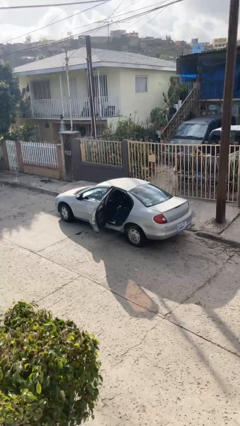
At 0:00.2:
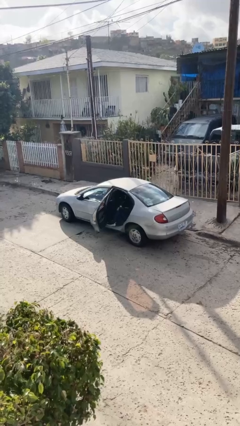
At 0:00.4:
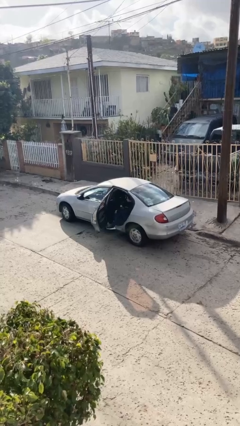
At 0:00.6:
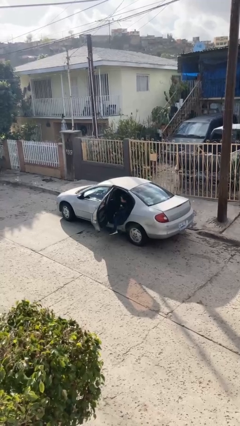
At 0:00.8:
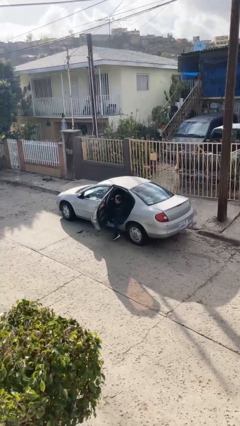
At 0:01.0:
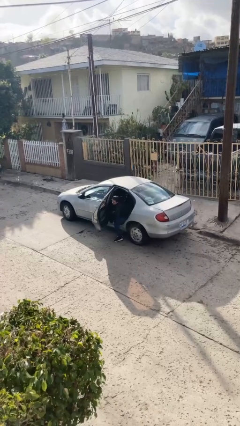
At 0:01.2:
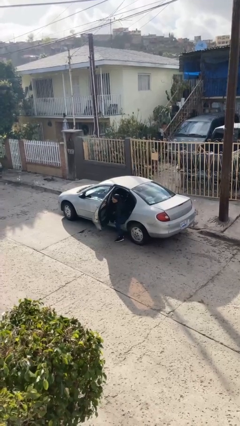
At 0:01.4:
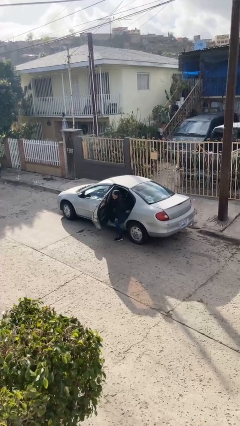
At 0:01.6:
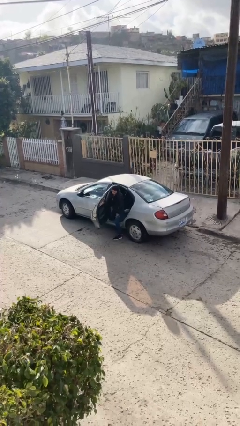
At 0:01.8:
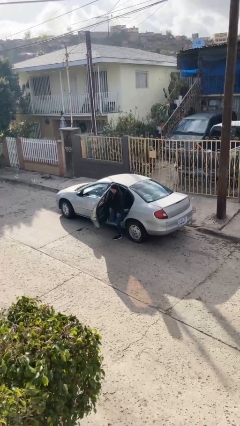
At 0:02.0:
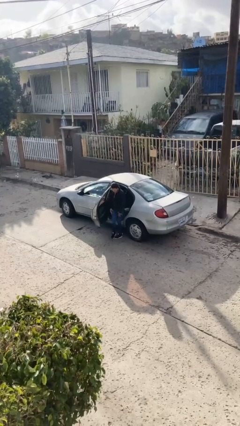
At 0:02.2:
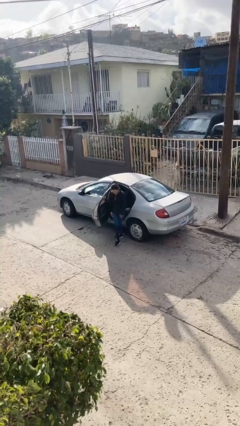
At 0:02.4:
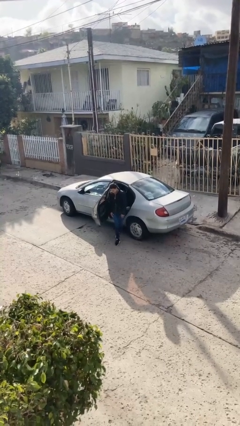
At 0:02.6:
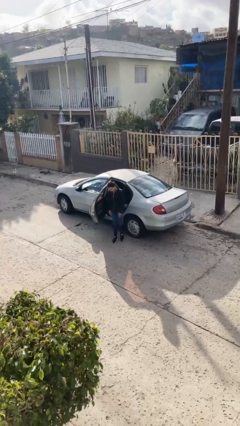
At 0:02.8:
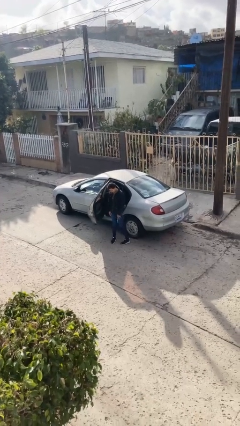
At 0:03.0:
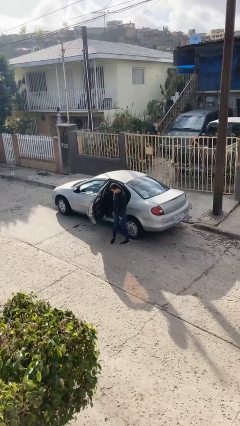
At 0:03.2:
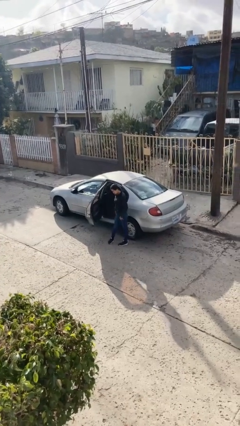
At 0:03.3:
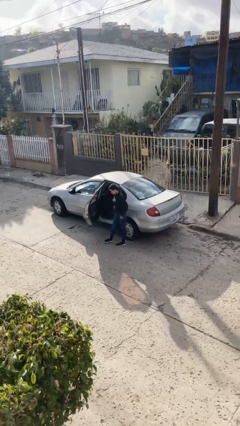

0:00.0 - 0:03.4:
person exits car

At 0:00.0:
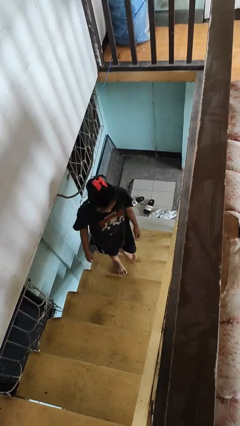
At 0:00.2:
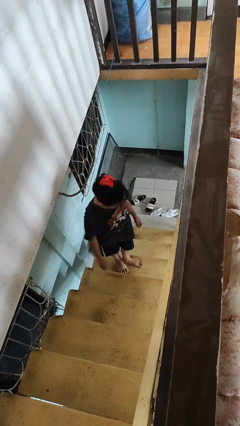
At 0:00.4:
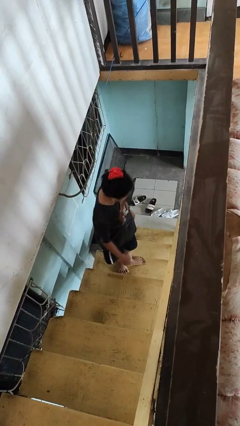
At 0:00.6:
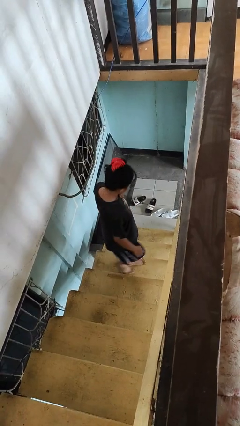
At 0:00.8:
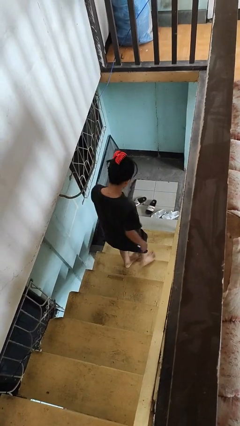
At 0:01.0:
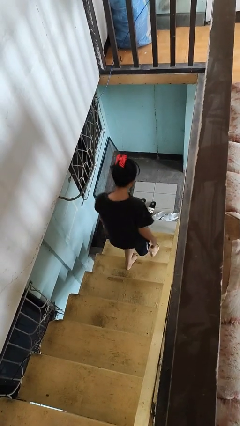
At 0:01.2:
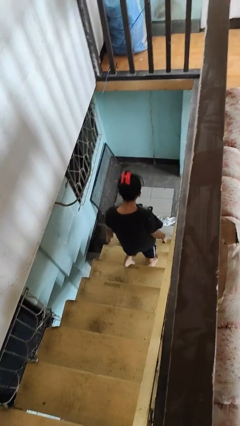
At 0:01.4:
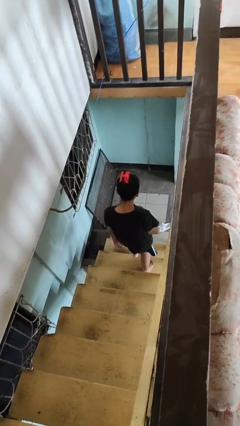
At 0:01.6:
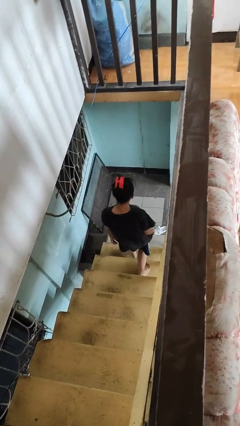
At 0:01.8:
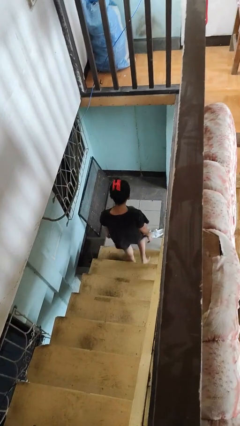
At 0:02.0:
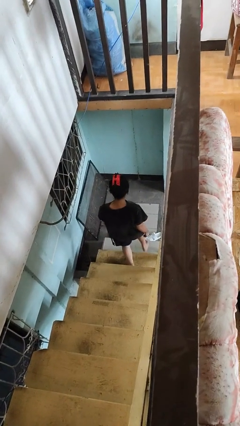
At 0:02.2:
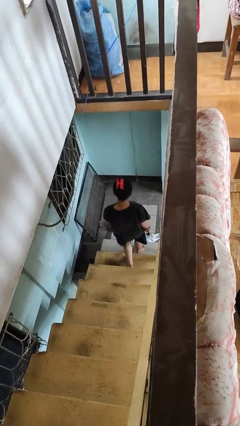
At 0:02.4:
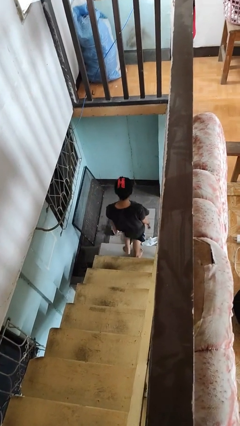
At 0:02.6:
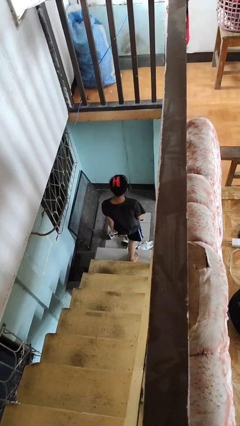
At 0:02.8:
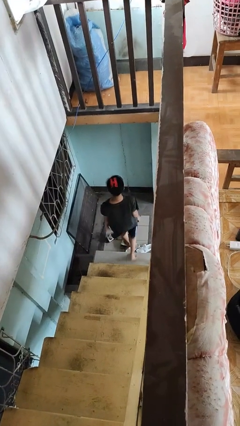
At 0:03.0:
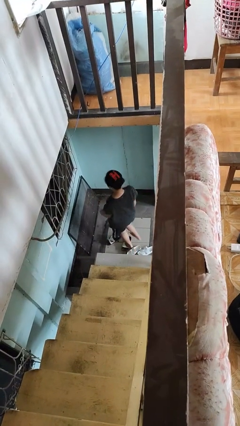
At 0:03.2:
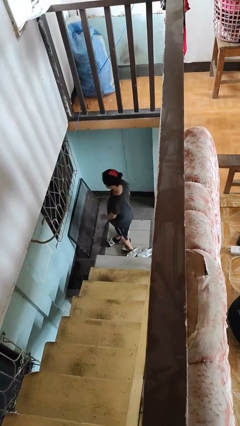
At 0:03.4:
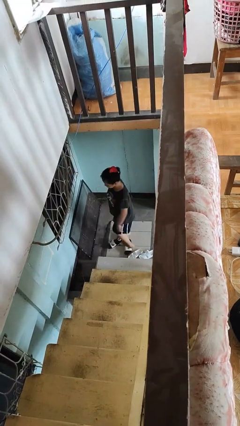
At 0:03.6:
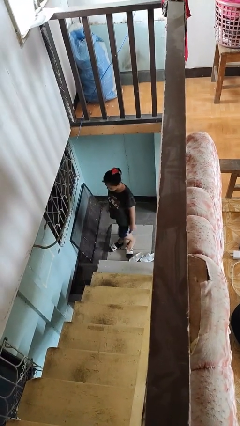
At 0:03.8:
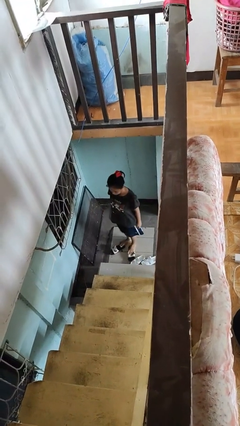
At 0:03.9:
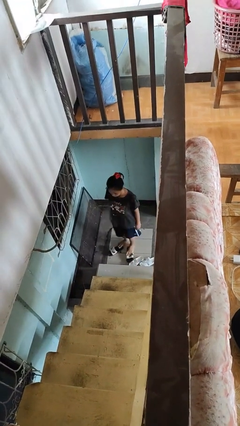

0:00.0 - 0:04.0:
person climbs down stairs

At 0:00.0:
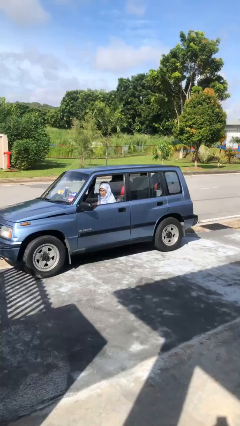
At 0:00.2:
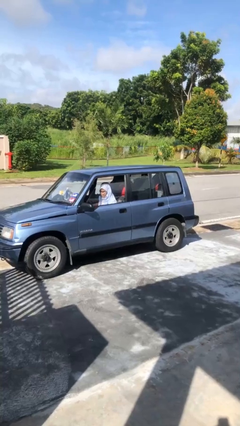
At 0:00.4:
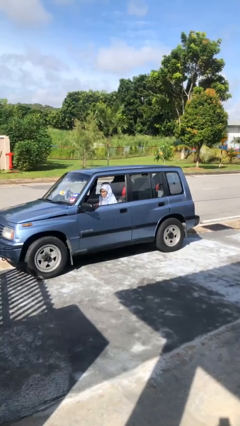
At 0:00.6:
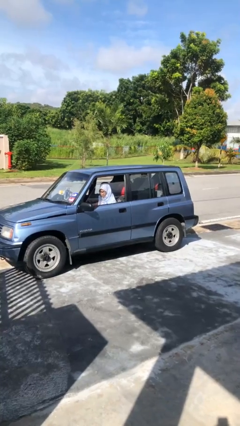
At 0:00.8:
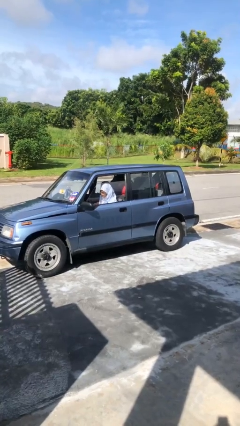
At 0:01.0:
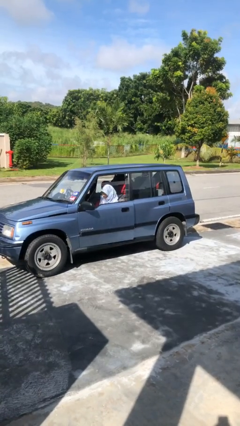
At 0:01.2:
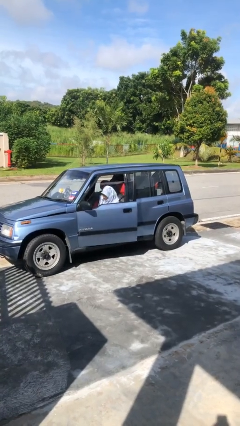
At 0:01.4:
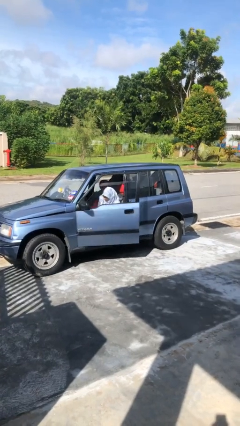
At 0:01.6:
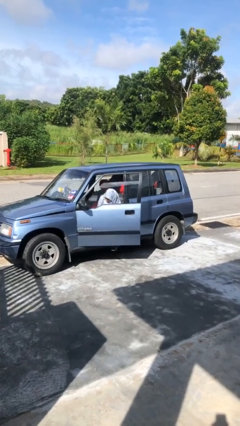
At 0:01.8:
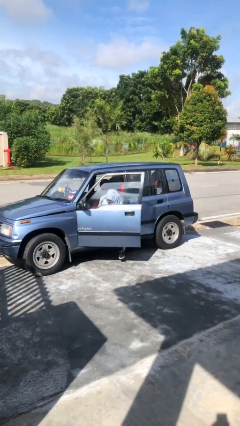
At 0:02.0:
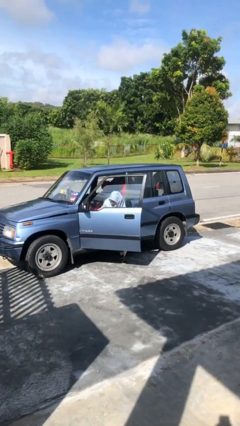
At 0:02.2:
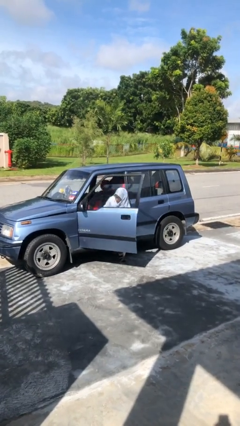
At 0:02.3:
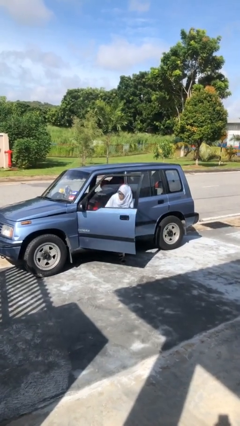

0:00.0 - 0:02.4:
person opens car door

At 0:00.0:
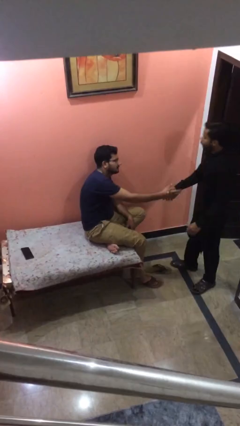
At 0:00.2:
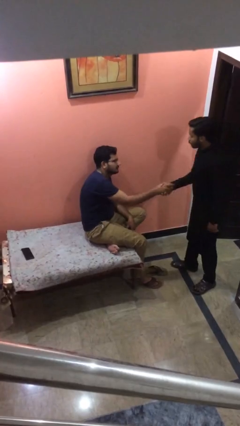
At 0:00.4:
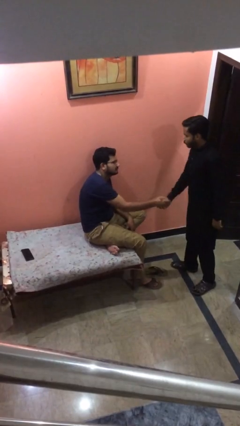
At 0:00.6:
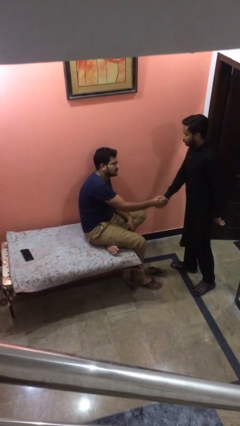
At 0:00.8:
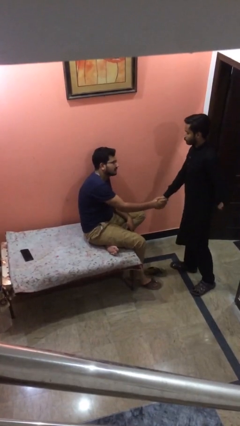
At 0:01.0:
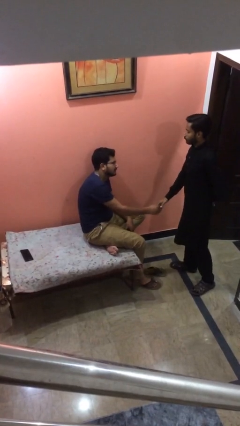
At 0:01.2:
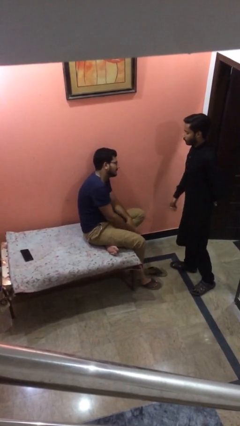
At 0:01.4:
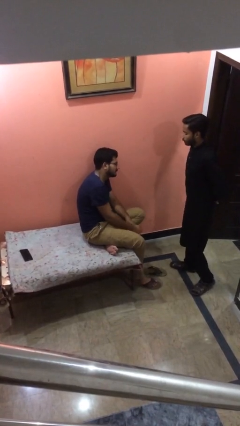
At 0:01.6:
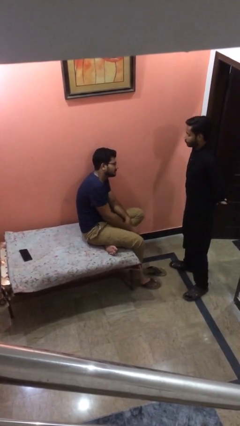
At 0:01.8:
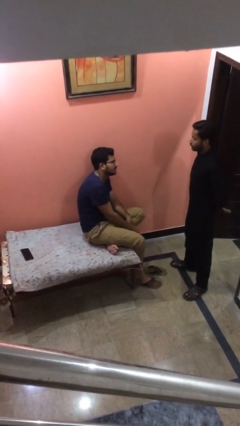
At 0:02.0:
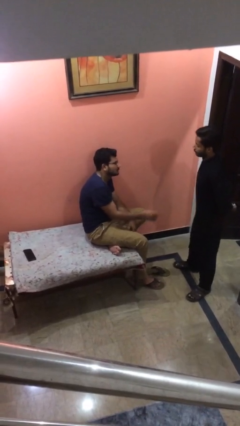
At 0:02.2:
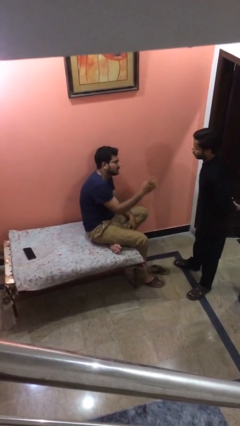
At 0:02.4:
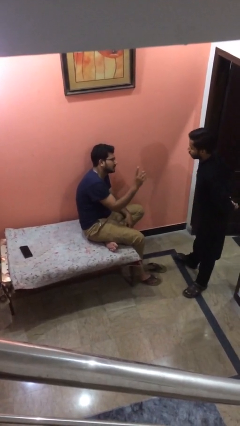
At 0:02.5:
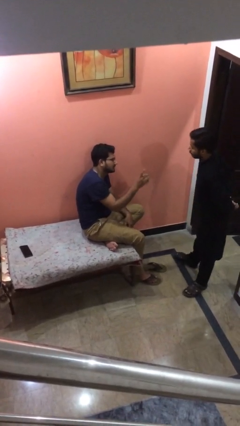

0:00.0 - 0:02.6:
person shakes hand

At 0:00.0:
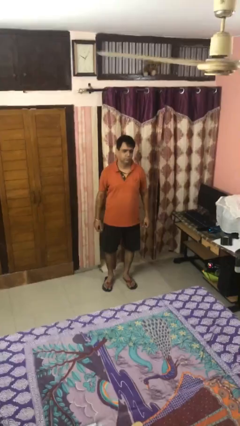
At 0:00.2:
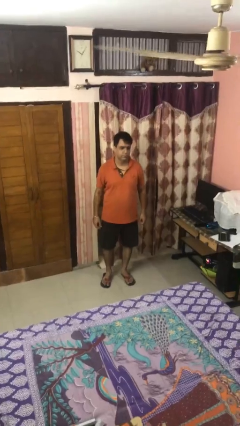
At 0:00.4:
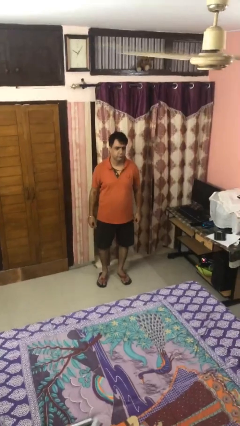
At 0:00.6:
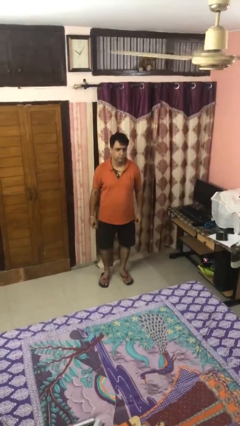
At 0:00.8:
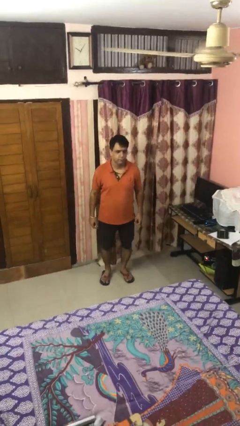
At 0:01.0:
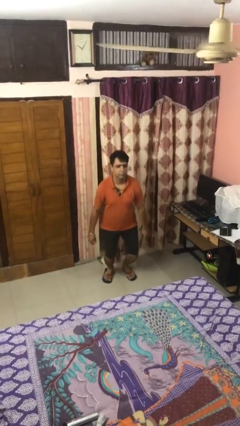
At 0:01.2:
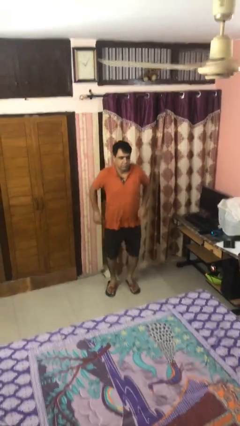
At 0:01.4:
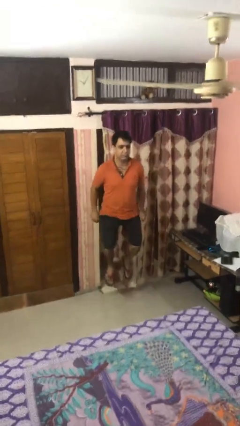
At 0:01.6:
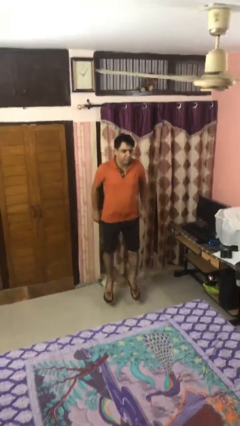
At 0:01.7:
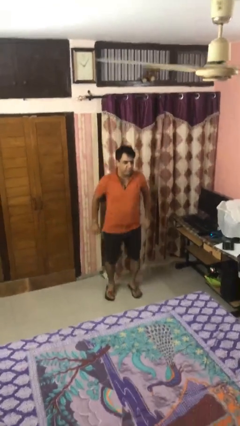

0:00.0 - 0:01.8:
person jumps

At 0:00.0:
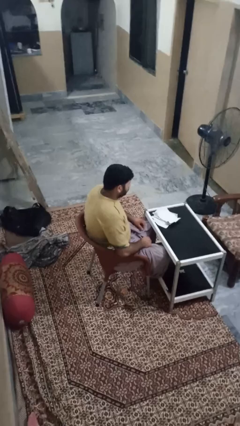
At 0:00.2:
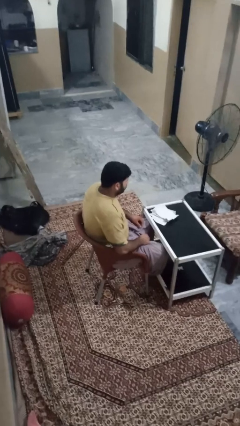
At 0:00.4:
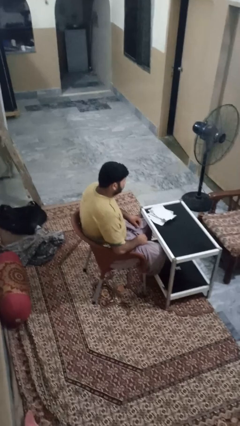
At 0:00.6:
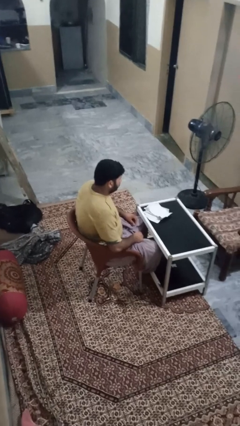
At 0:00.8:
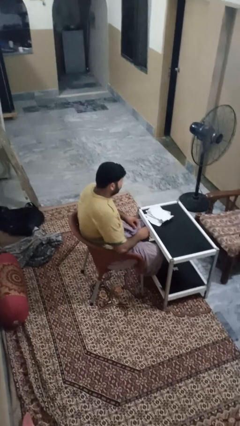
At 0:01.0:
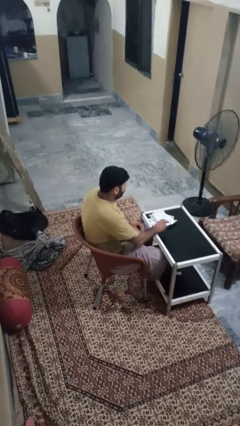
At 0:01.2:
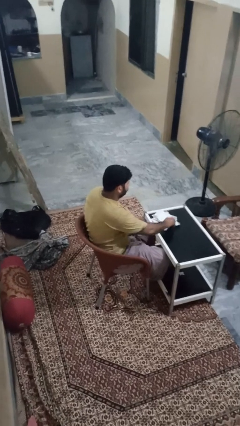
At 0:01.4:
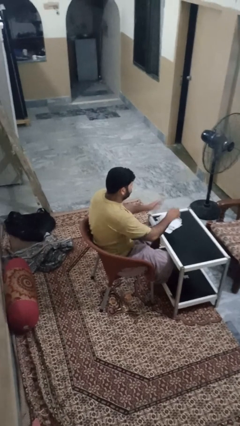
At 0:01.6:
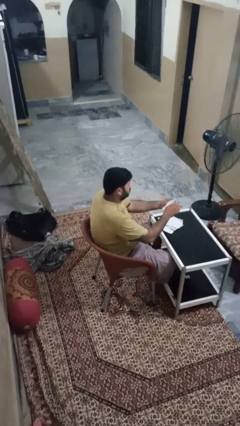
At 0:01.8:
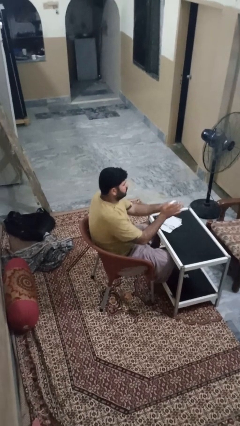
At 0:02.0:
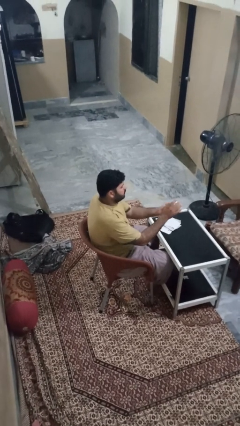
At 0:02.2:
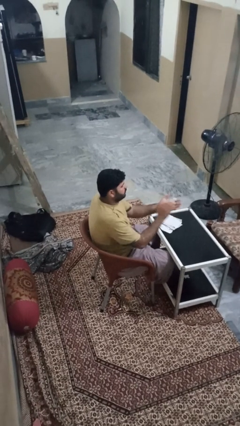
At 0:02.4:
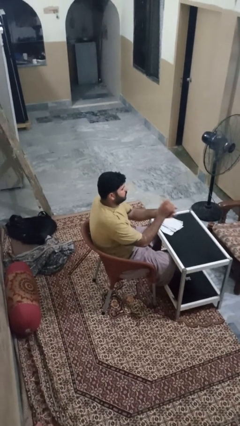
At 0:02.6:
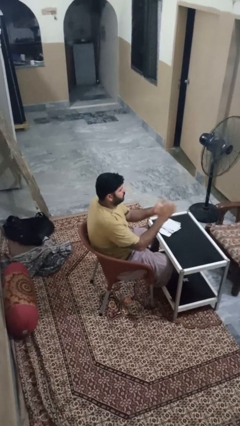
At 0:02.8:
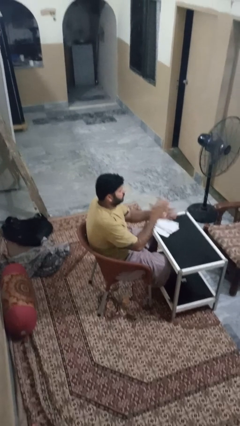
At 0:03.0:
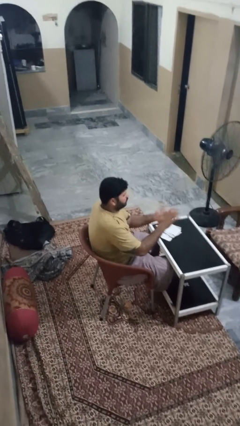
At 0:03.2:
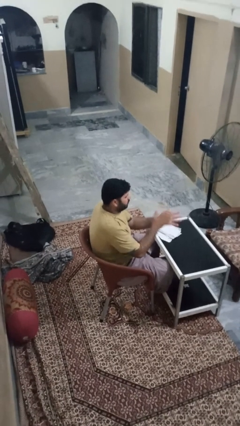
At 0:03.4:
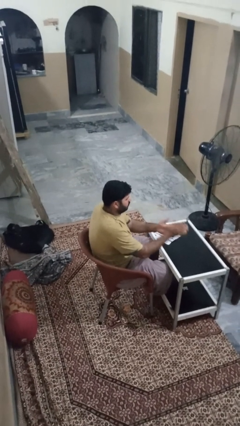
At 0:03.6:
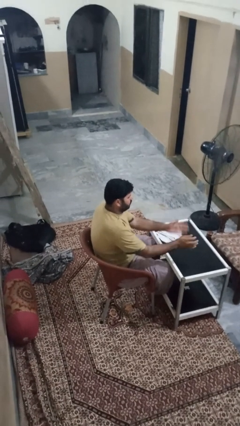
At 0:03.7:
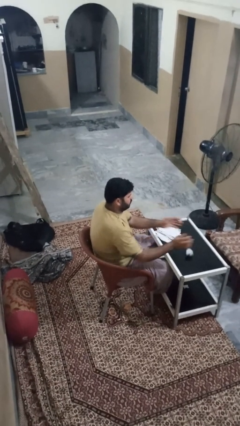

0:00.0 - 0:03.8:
person crumples paper
